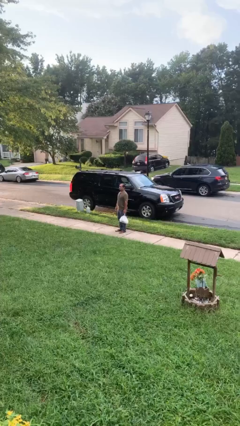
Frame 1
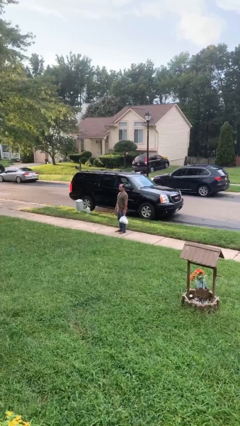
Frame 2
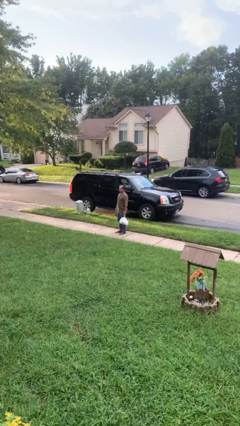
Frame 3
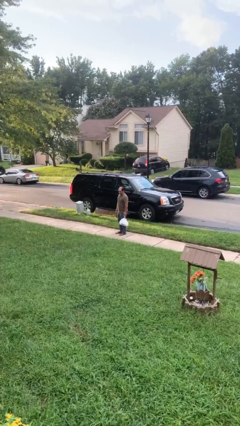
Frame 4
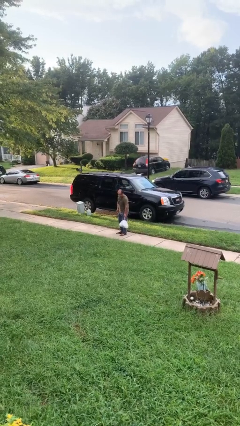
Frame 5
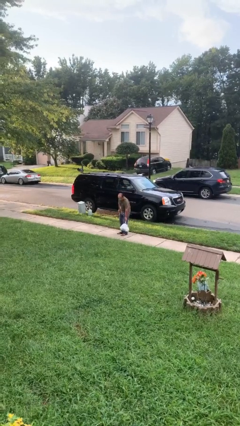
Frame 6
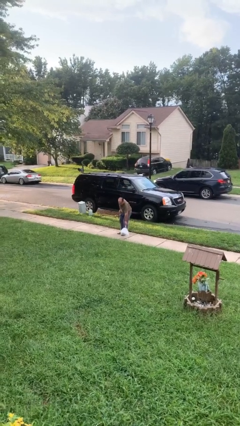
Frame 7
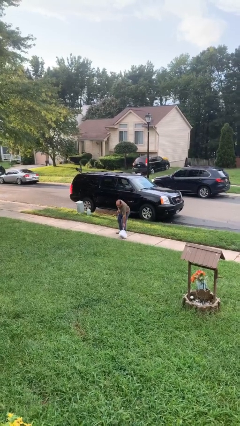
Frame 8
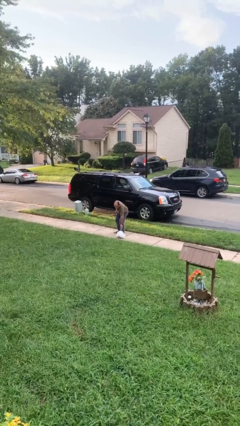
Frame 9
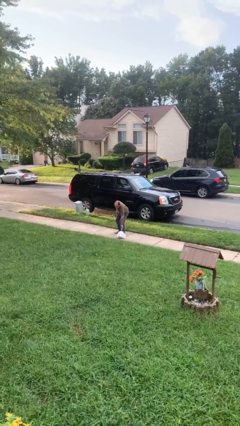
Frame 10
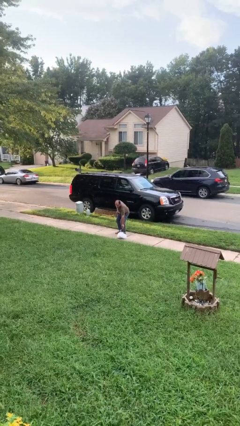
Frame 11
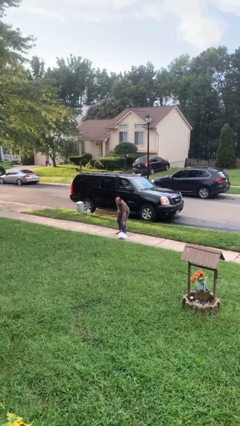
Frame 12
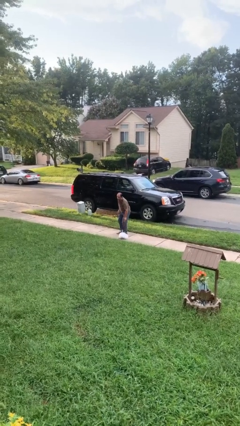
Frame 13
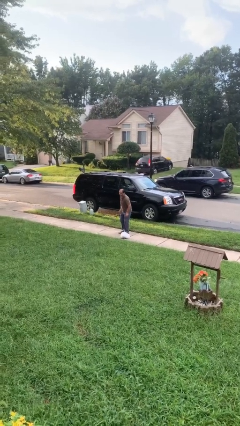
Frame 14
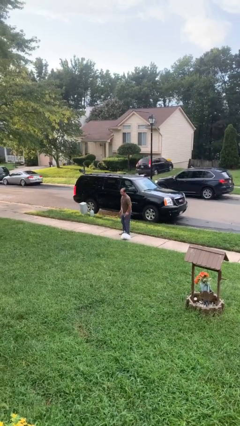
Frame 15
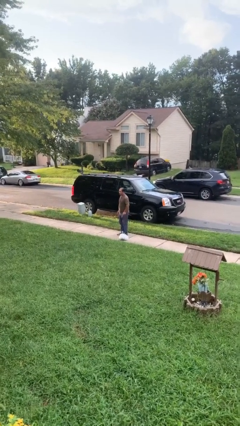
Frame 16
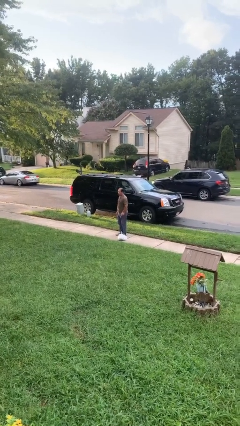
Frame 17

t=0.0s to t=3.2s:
person puts down object on floor

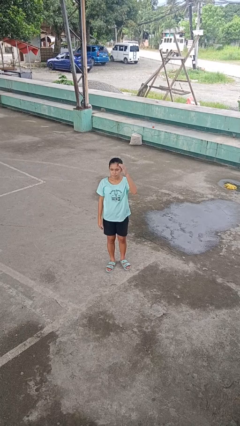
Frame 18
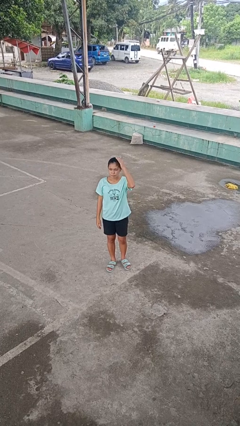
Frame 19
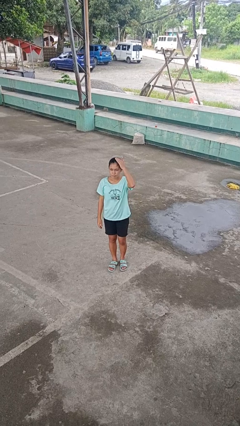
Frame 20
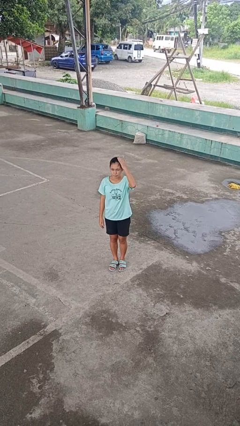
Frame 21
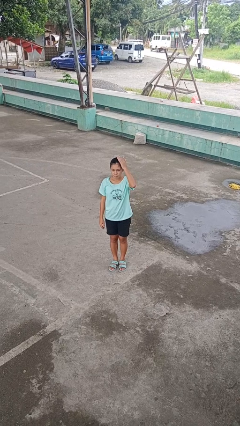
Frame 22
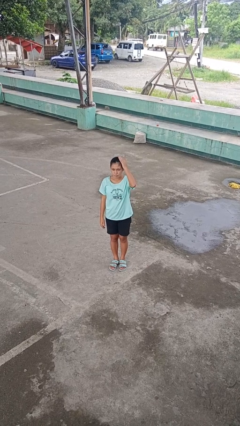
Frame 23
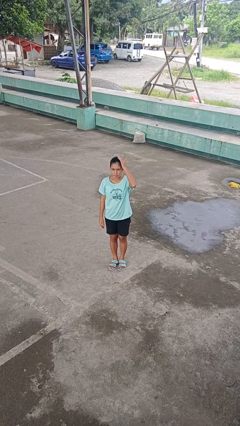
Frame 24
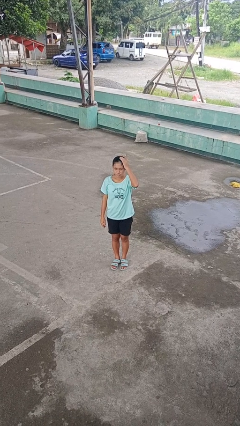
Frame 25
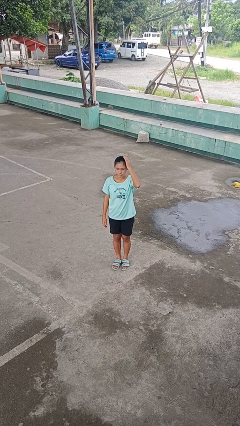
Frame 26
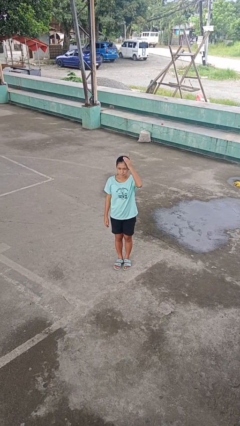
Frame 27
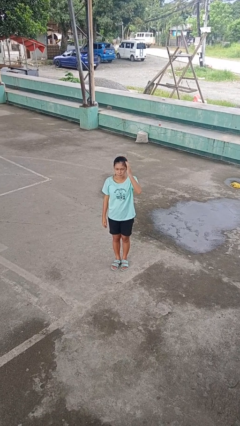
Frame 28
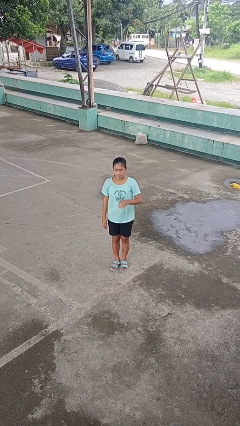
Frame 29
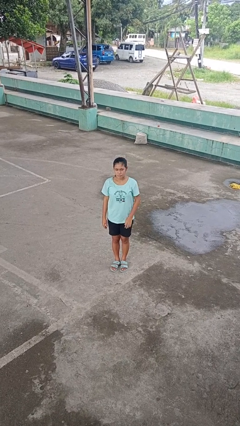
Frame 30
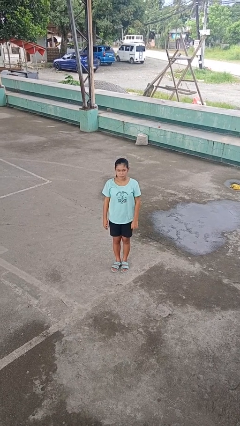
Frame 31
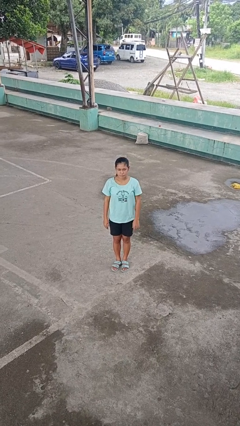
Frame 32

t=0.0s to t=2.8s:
person pats head

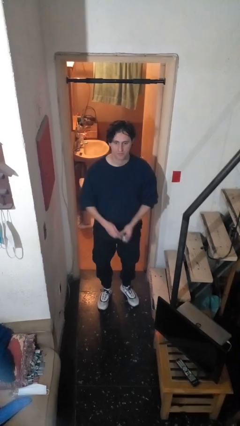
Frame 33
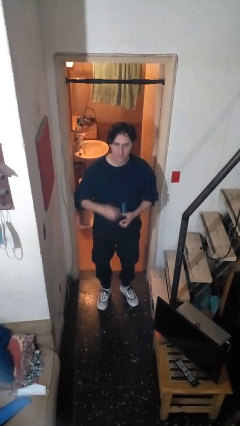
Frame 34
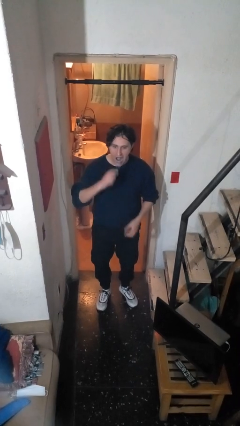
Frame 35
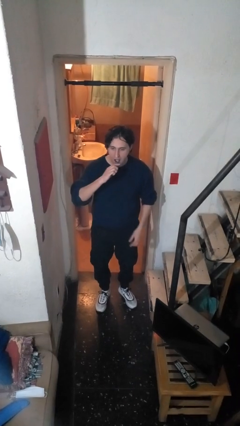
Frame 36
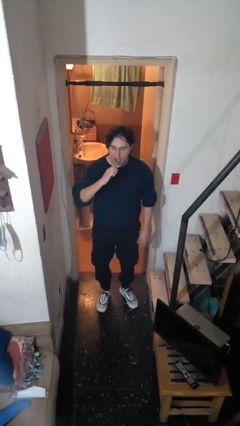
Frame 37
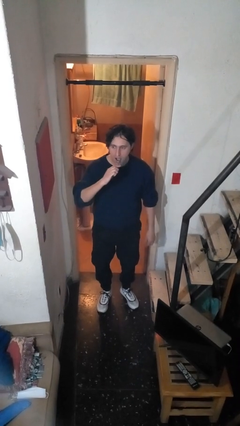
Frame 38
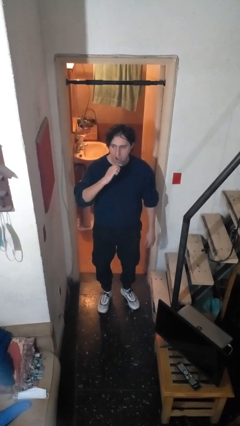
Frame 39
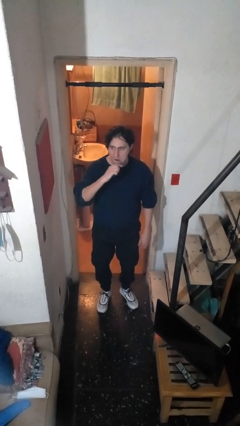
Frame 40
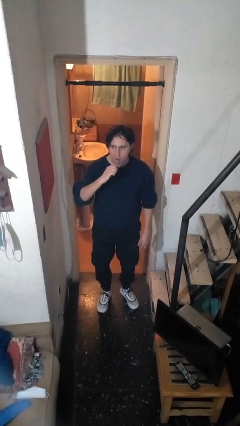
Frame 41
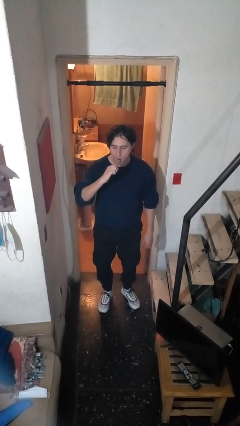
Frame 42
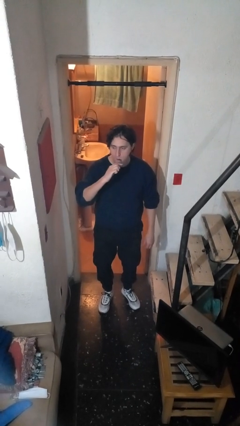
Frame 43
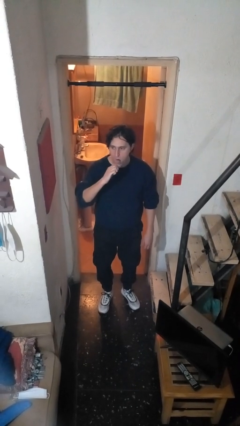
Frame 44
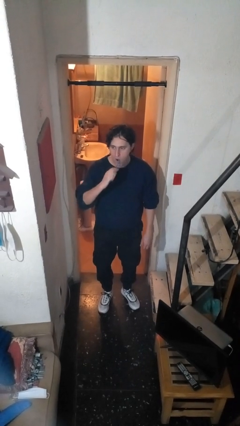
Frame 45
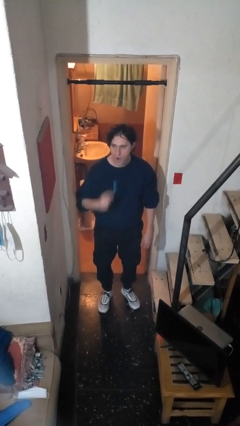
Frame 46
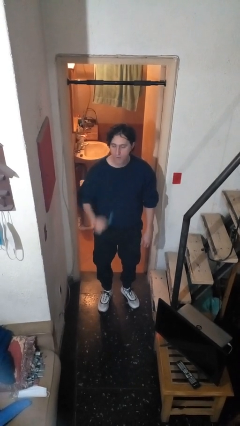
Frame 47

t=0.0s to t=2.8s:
person brushes teeth

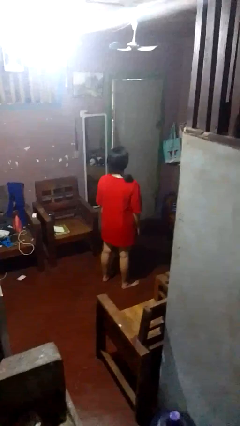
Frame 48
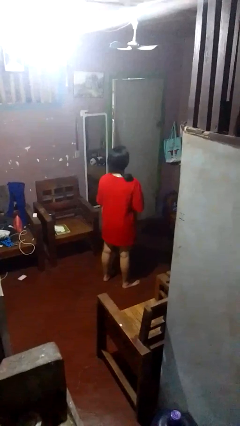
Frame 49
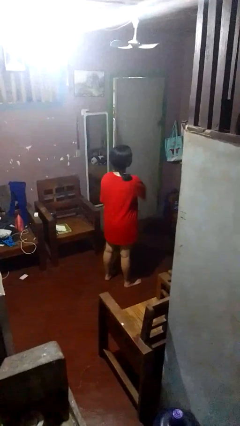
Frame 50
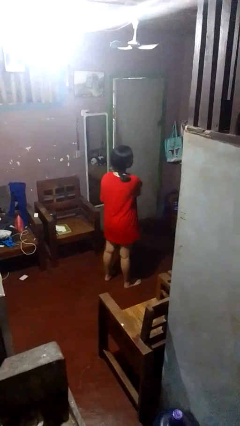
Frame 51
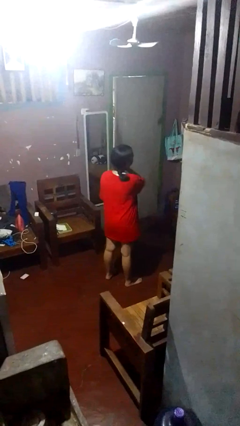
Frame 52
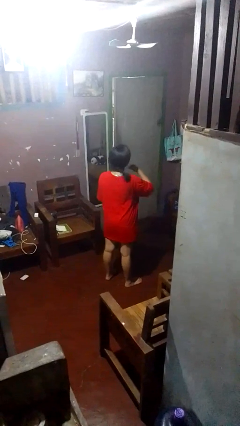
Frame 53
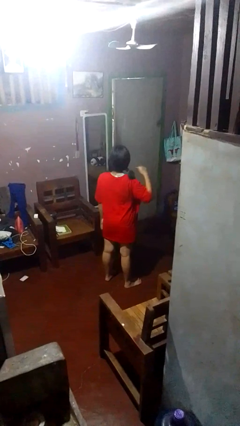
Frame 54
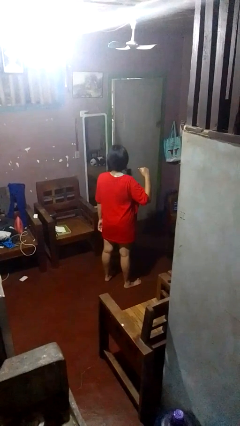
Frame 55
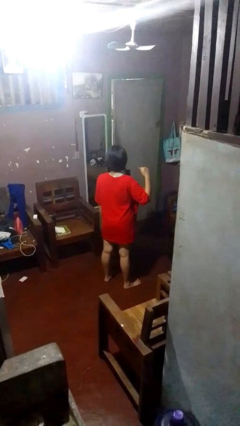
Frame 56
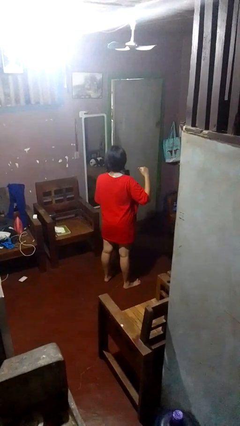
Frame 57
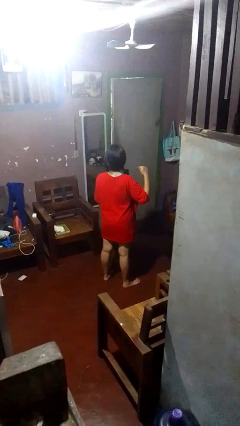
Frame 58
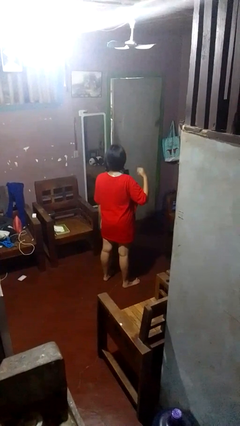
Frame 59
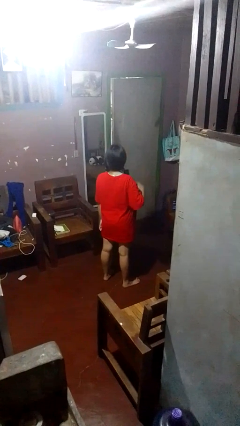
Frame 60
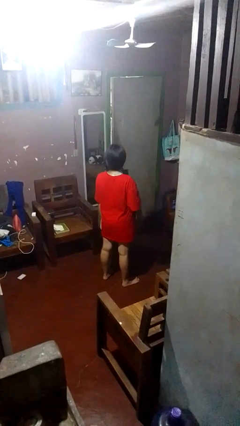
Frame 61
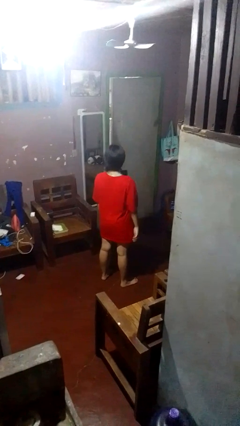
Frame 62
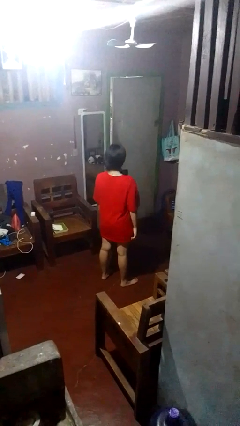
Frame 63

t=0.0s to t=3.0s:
person gestures cut

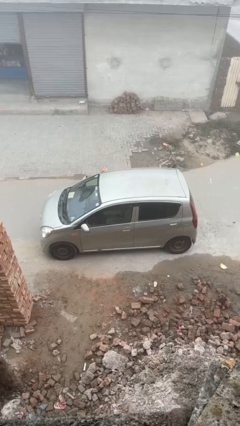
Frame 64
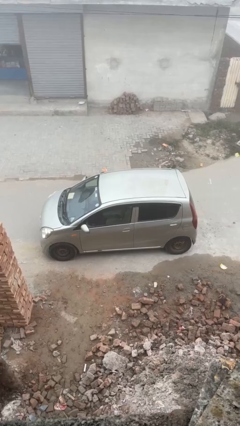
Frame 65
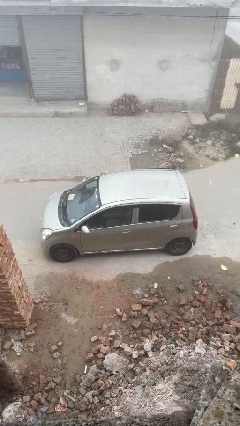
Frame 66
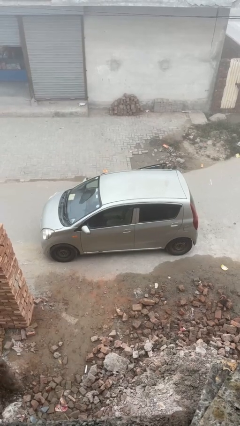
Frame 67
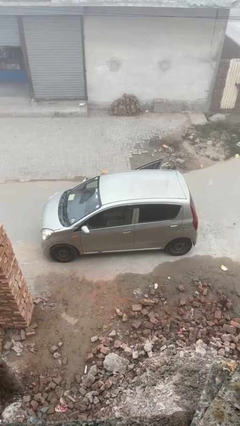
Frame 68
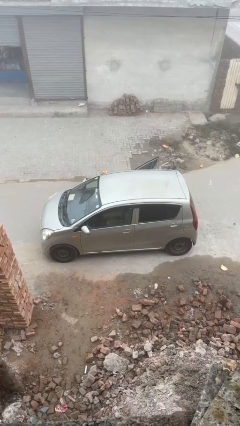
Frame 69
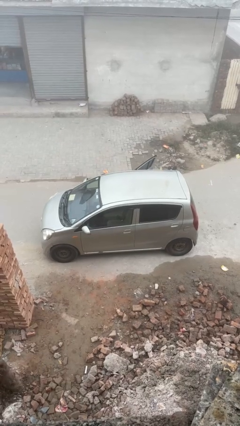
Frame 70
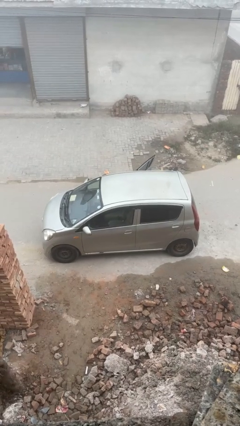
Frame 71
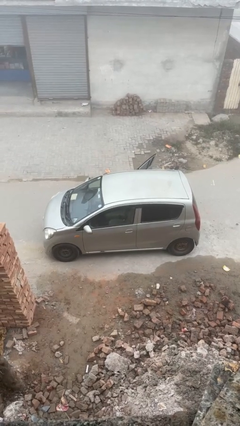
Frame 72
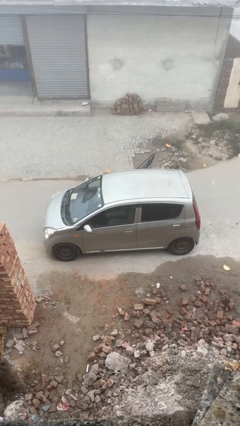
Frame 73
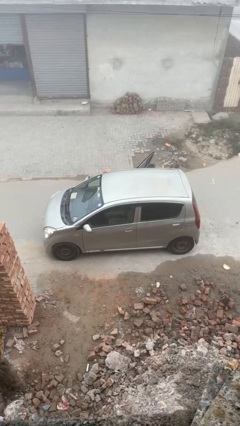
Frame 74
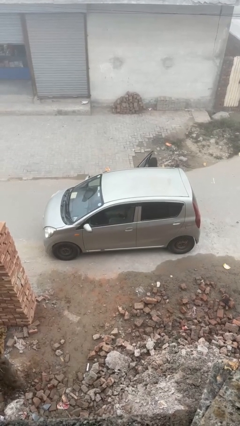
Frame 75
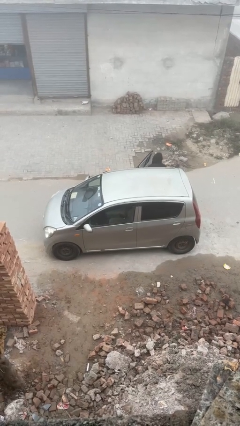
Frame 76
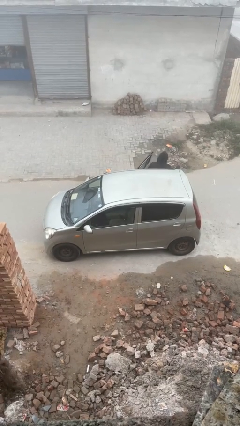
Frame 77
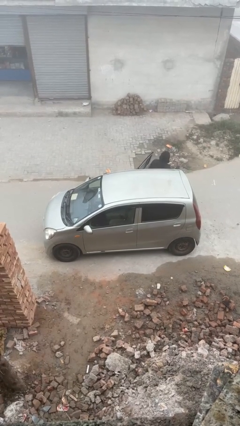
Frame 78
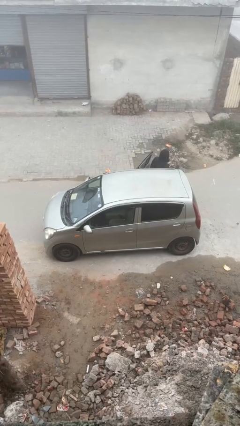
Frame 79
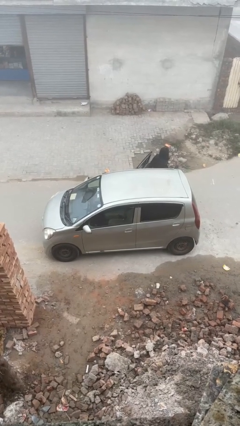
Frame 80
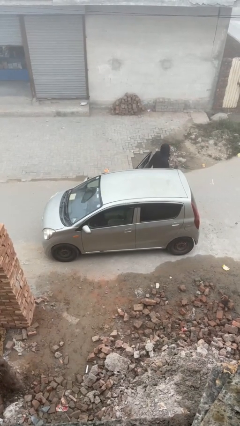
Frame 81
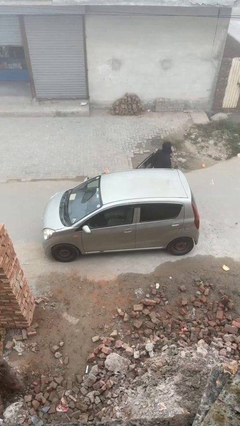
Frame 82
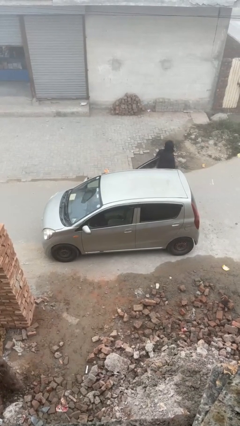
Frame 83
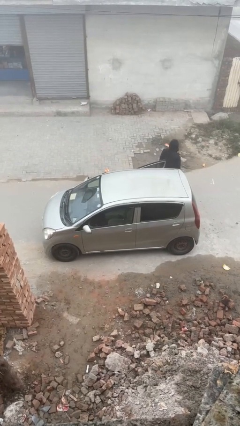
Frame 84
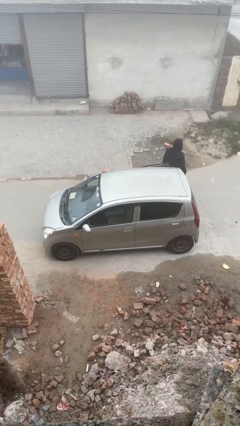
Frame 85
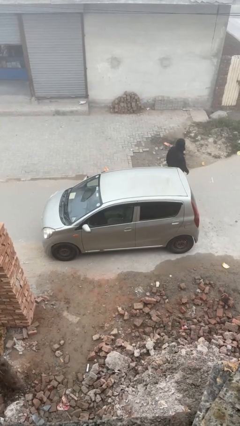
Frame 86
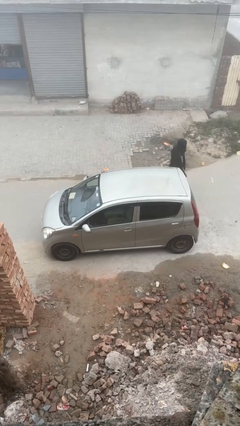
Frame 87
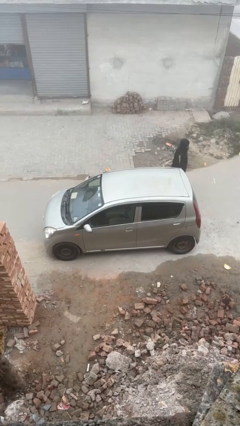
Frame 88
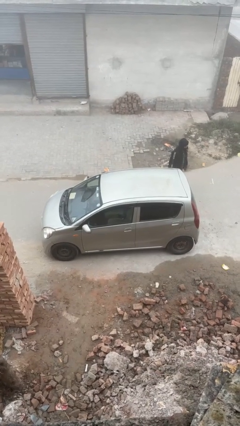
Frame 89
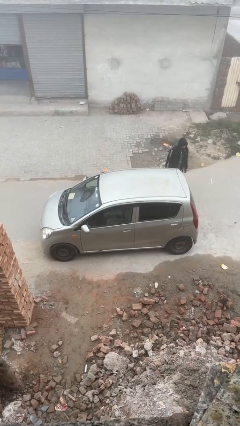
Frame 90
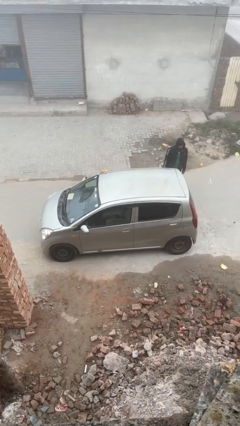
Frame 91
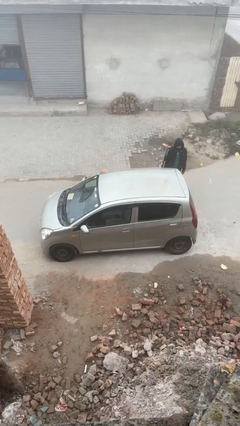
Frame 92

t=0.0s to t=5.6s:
car drops off person
